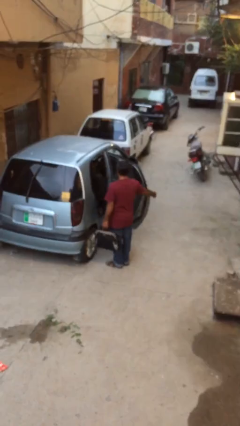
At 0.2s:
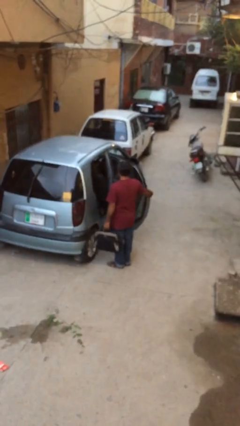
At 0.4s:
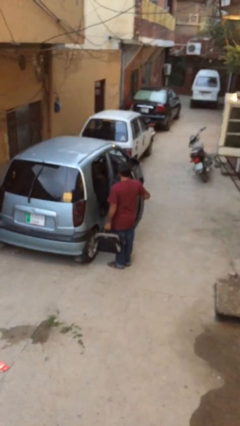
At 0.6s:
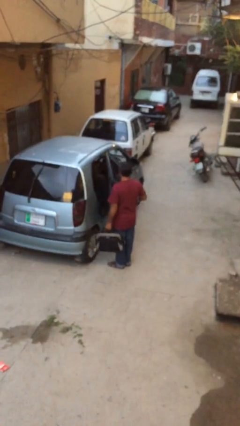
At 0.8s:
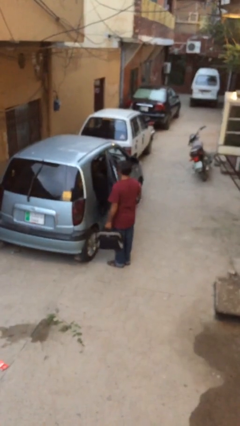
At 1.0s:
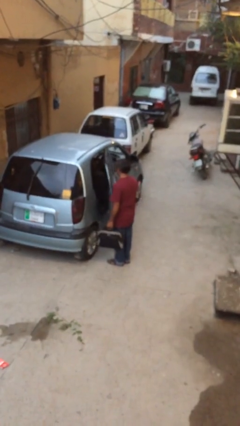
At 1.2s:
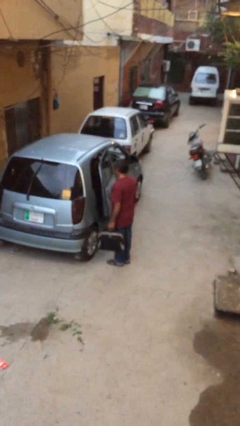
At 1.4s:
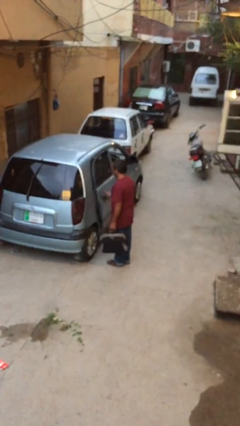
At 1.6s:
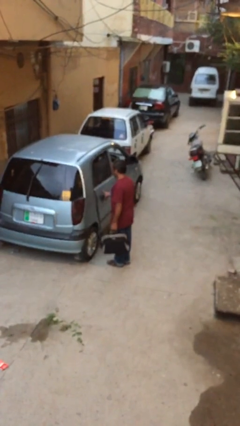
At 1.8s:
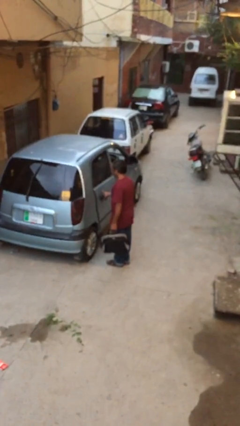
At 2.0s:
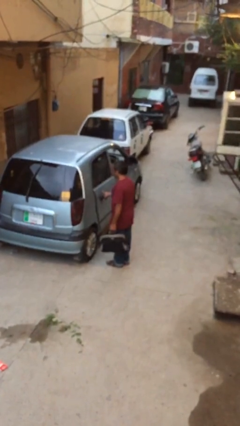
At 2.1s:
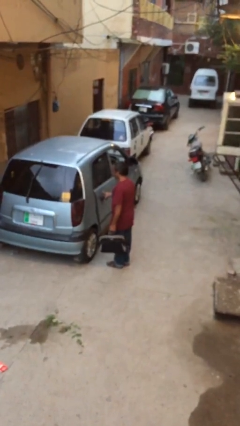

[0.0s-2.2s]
person closes car door

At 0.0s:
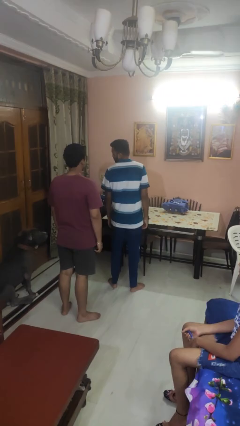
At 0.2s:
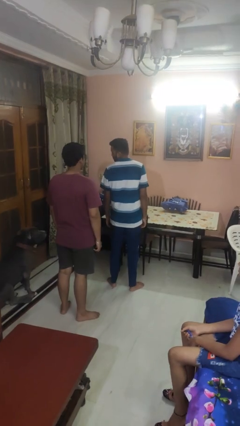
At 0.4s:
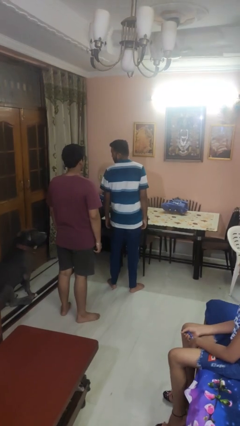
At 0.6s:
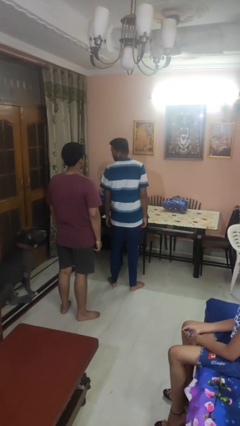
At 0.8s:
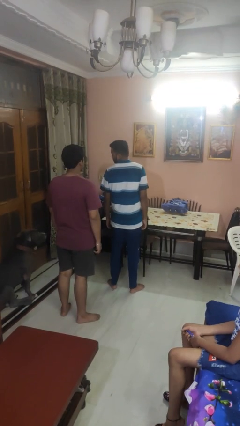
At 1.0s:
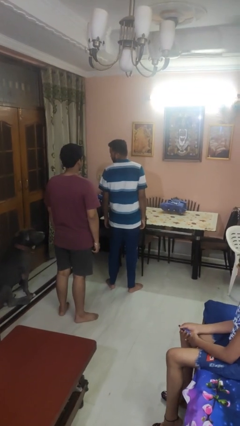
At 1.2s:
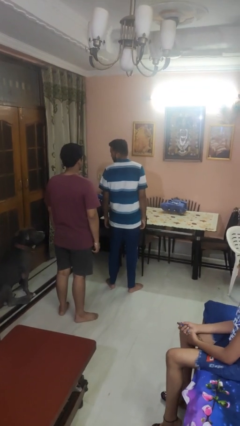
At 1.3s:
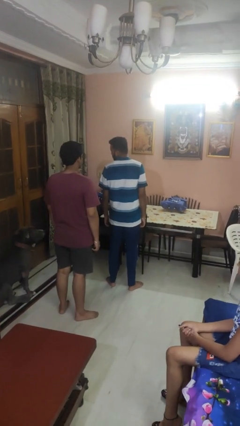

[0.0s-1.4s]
person looks over shoulder

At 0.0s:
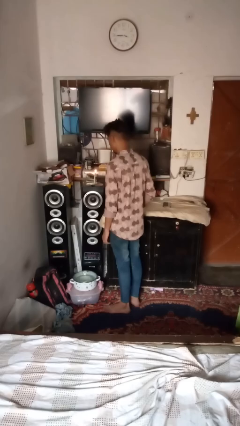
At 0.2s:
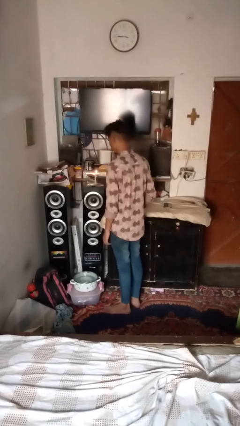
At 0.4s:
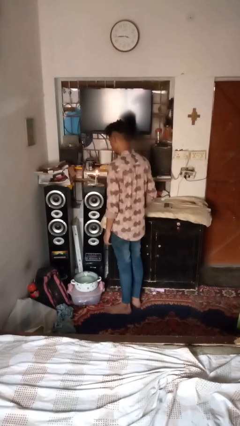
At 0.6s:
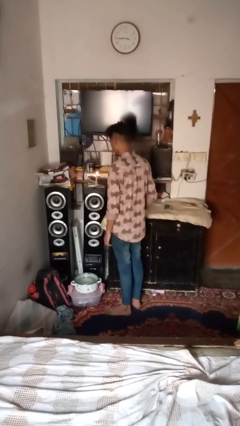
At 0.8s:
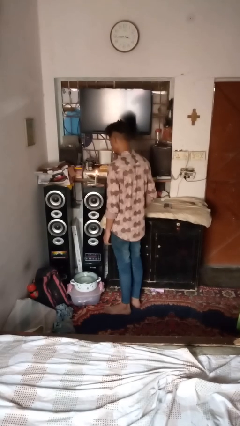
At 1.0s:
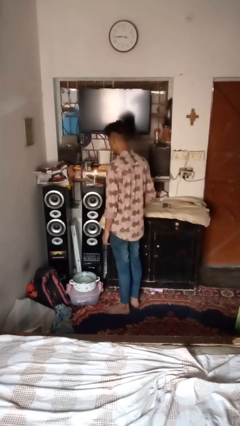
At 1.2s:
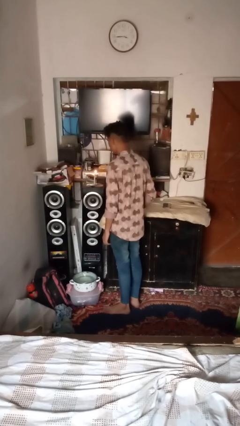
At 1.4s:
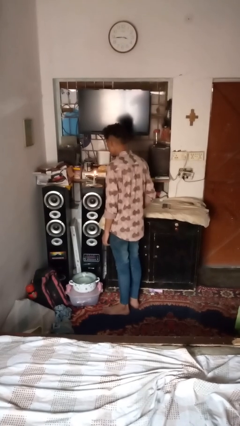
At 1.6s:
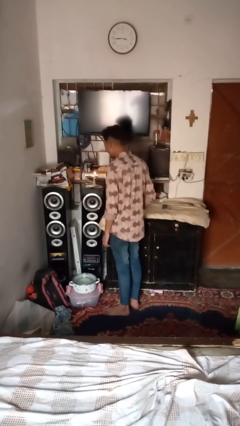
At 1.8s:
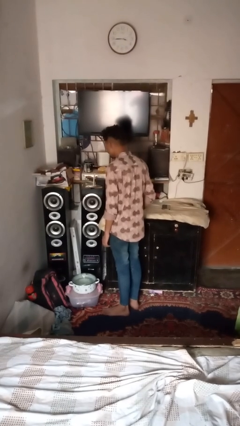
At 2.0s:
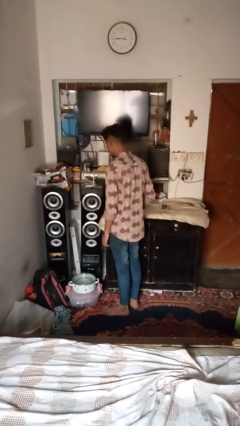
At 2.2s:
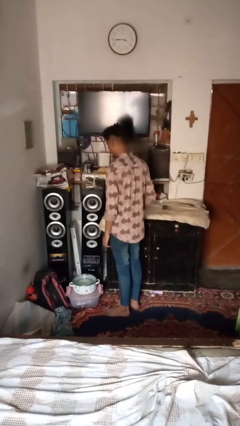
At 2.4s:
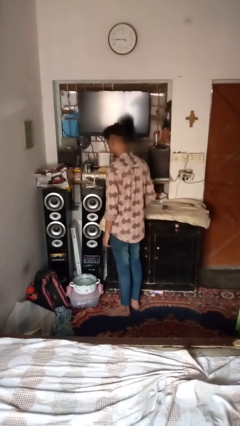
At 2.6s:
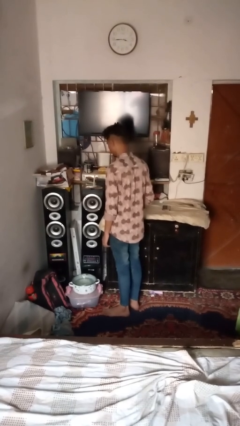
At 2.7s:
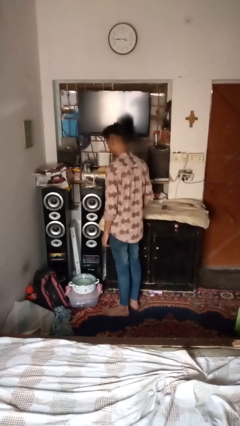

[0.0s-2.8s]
person extinguishes candle

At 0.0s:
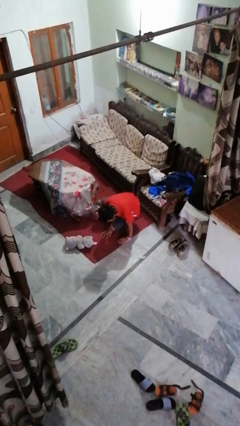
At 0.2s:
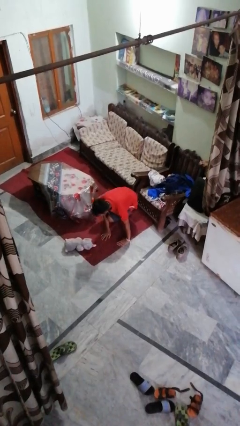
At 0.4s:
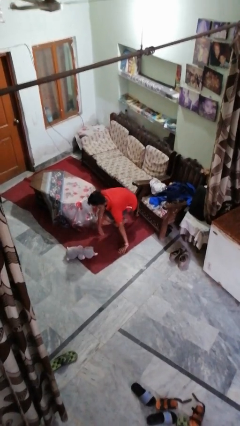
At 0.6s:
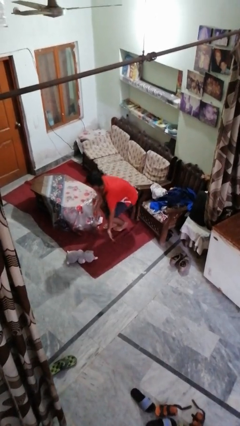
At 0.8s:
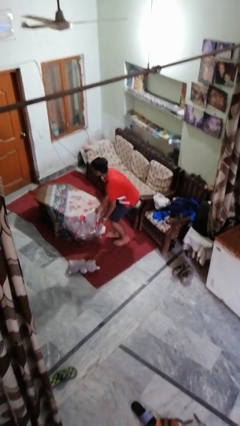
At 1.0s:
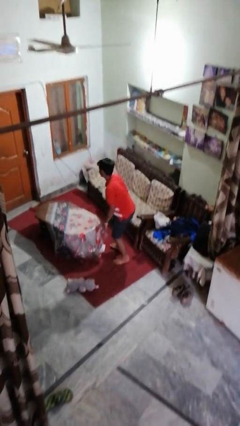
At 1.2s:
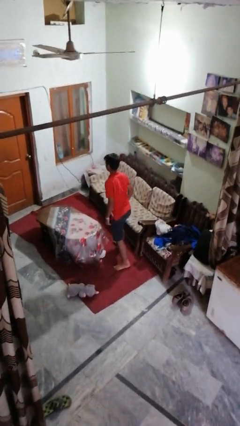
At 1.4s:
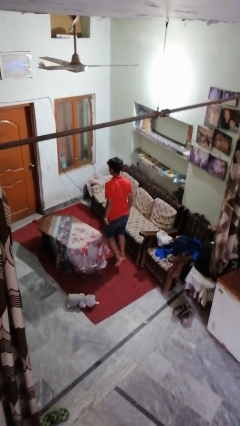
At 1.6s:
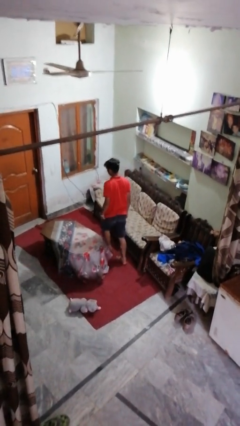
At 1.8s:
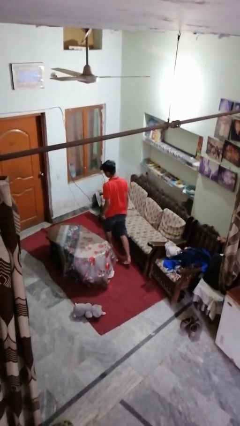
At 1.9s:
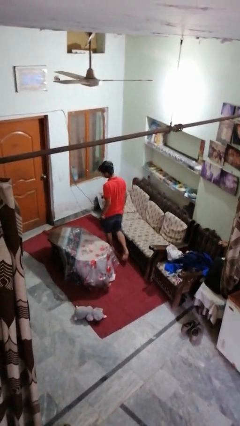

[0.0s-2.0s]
person stands up from floor

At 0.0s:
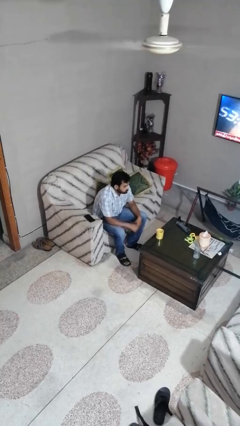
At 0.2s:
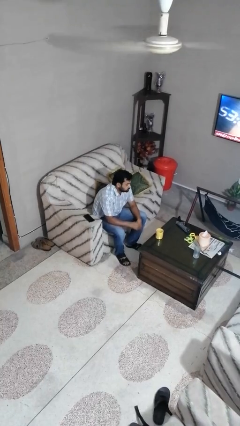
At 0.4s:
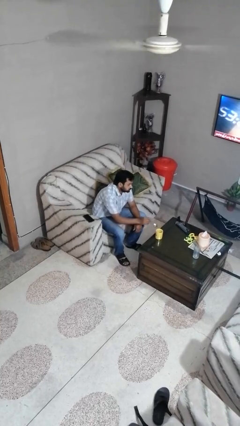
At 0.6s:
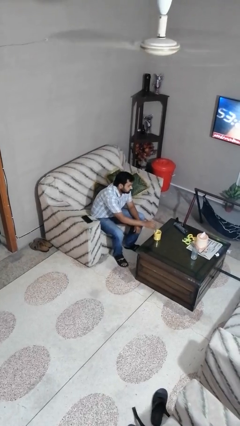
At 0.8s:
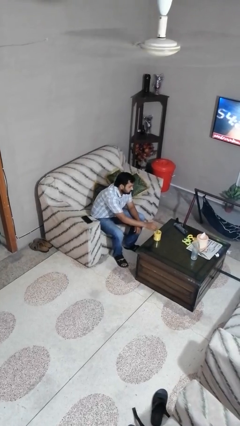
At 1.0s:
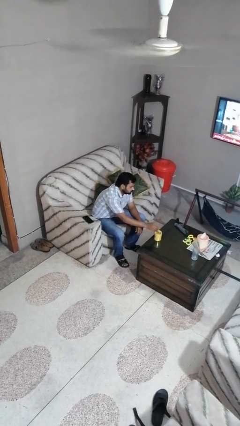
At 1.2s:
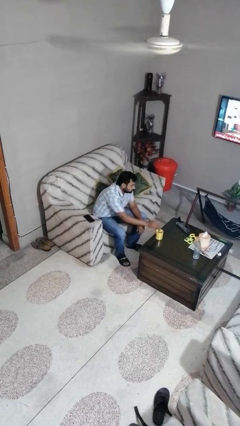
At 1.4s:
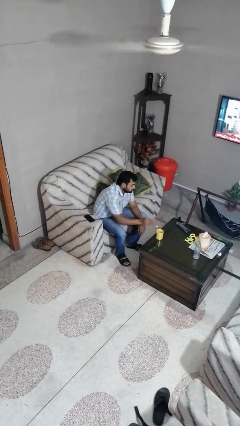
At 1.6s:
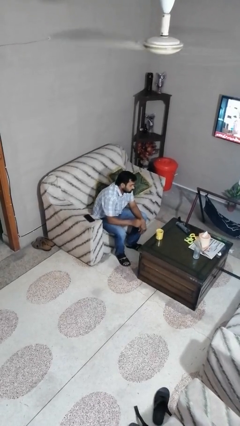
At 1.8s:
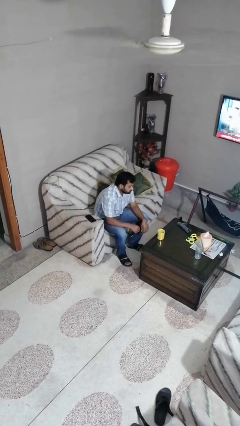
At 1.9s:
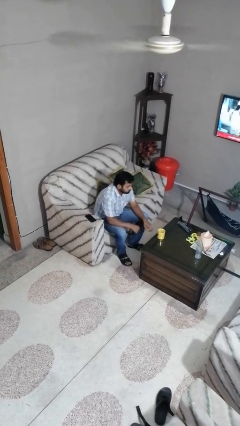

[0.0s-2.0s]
person stirs mug

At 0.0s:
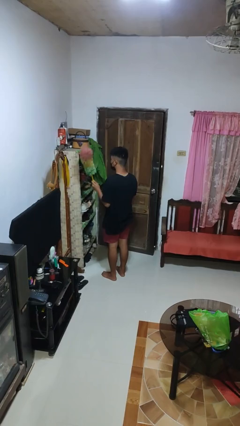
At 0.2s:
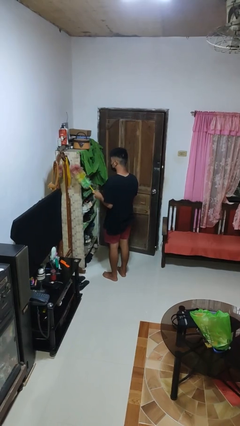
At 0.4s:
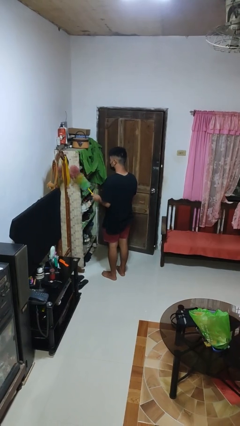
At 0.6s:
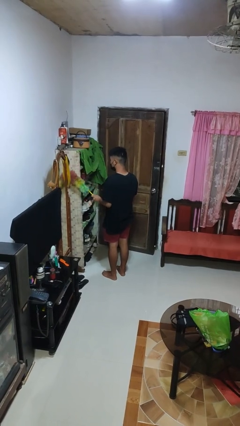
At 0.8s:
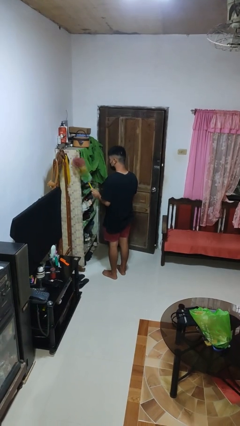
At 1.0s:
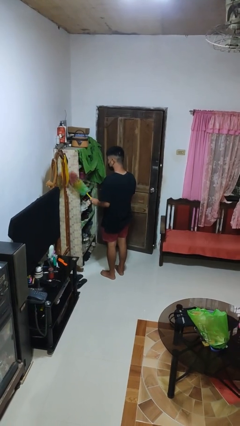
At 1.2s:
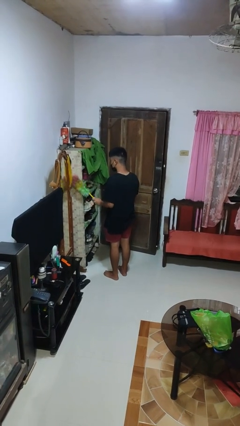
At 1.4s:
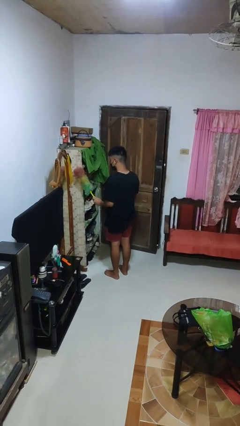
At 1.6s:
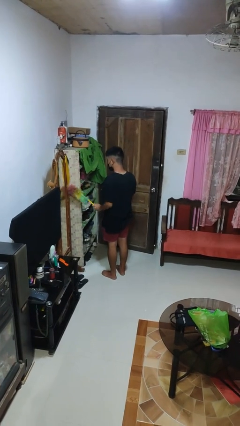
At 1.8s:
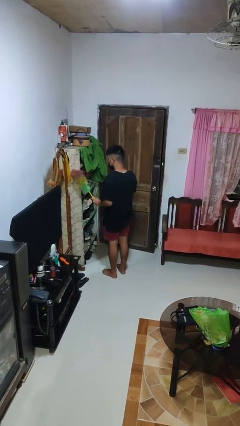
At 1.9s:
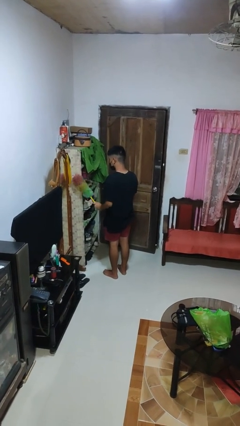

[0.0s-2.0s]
person dusts furniture

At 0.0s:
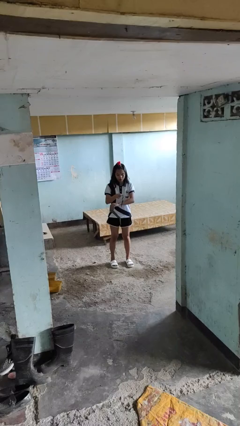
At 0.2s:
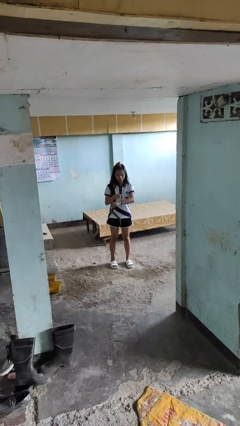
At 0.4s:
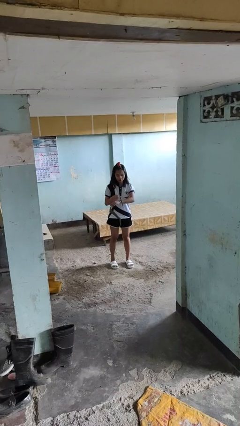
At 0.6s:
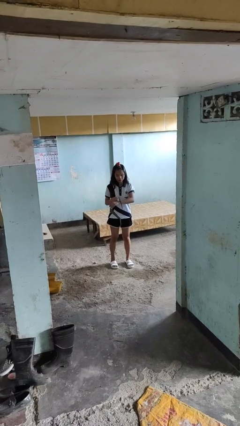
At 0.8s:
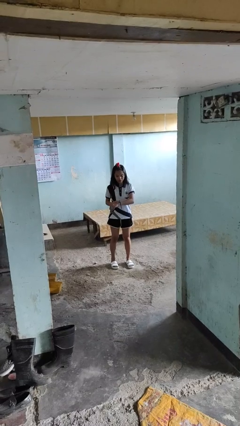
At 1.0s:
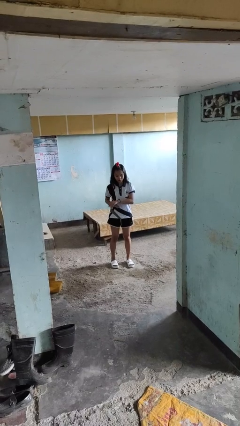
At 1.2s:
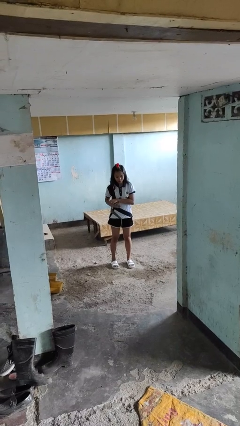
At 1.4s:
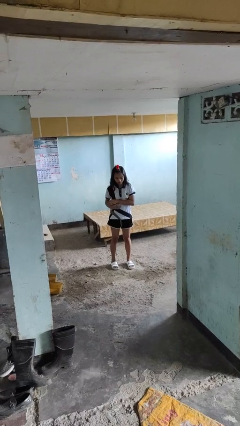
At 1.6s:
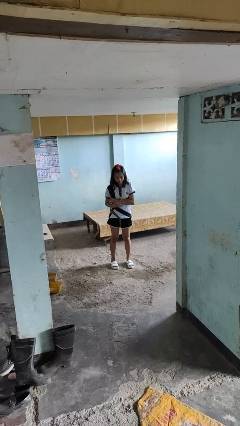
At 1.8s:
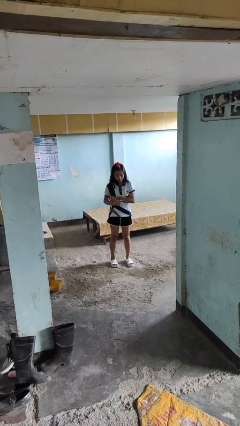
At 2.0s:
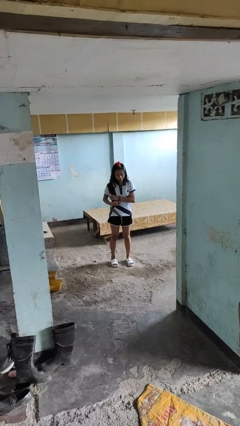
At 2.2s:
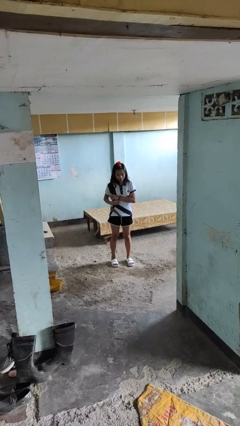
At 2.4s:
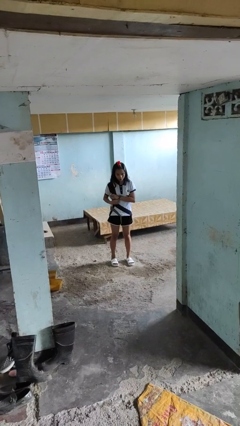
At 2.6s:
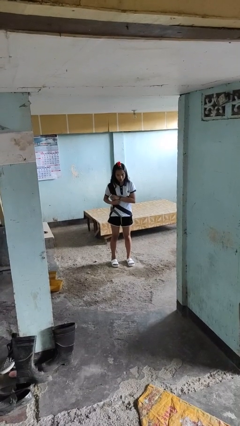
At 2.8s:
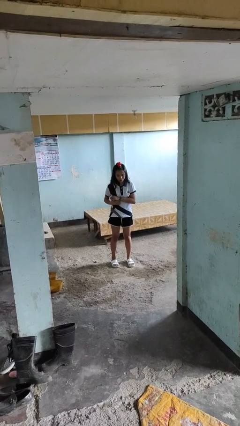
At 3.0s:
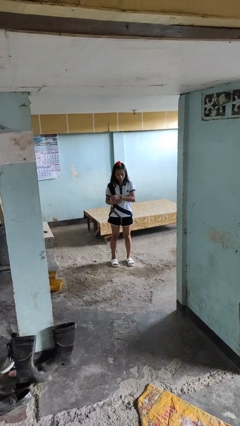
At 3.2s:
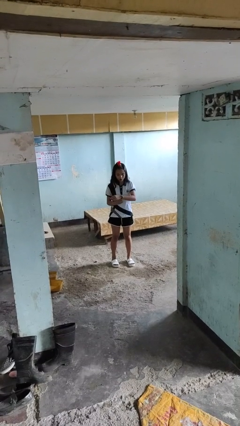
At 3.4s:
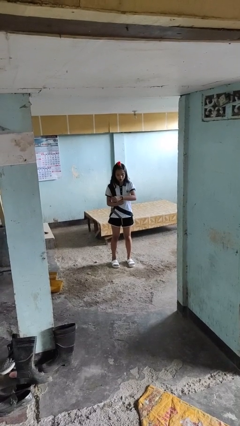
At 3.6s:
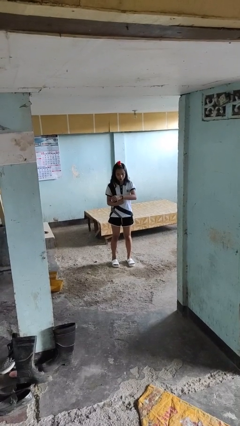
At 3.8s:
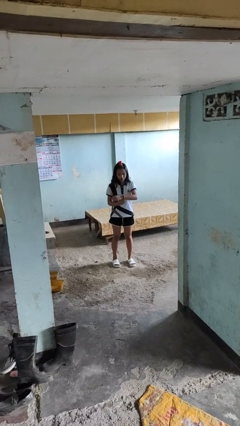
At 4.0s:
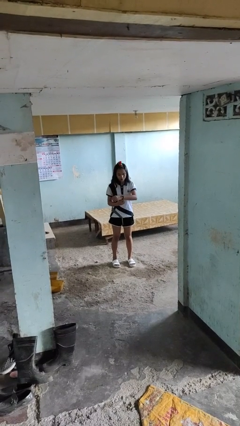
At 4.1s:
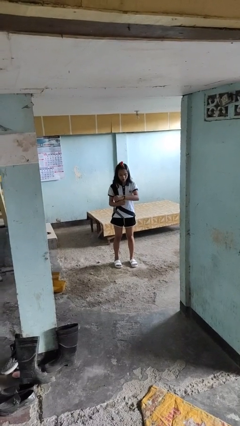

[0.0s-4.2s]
person puts on wristwatch

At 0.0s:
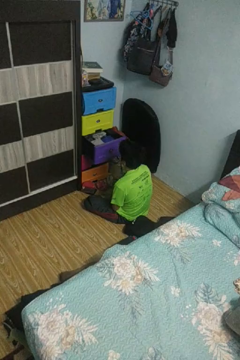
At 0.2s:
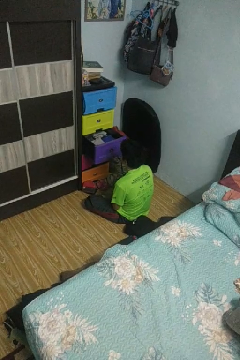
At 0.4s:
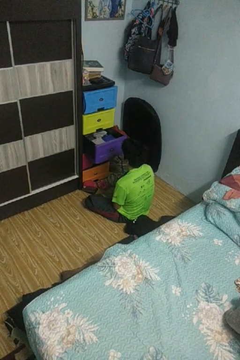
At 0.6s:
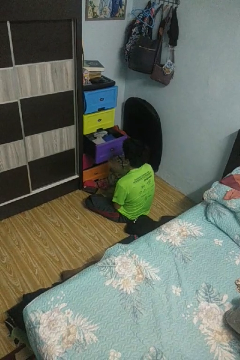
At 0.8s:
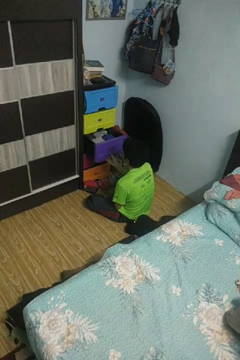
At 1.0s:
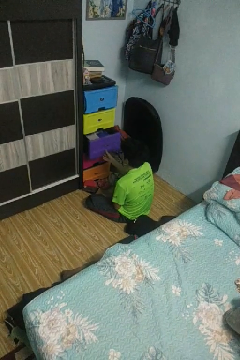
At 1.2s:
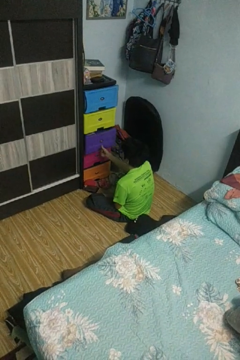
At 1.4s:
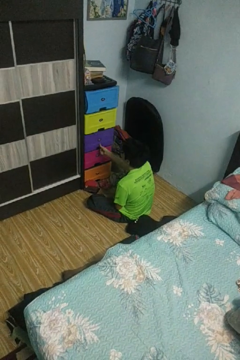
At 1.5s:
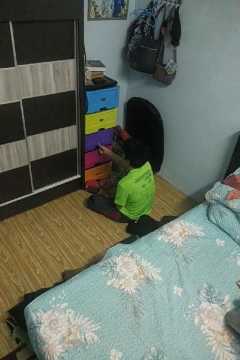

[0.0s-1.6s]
person closes dresser drawer
